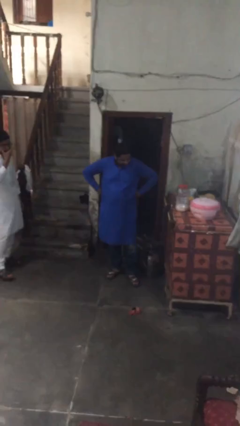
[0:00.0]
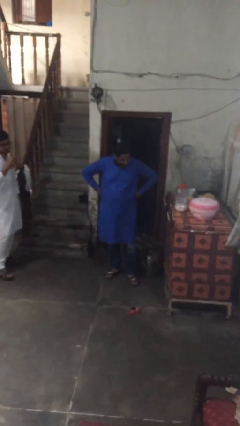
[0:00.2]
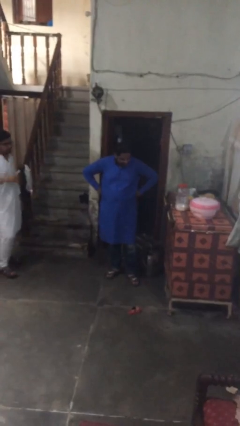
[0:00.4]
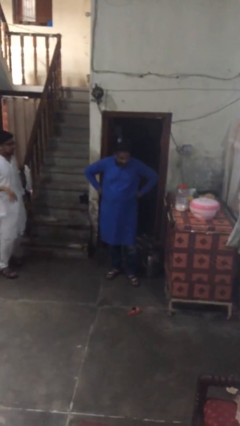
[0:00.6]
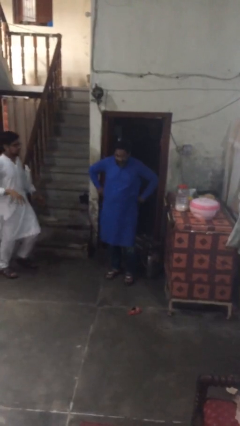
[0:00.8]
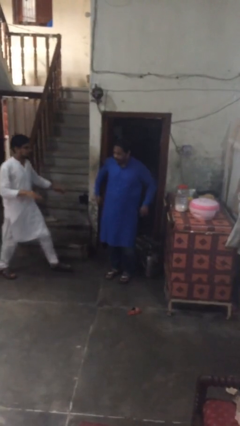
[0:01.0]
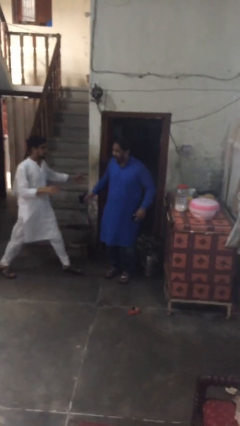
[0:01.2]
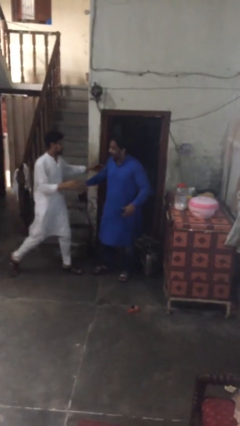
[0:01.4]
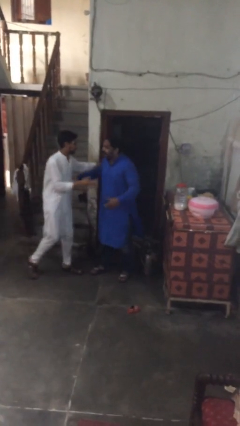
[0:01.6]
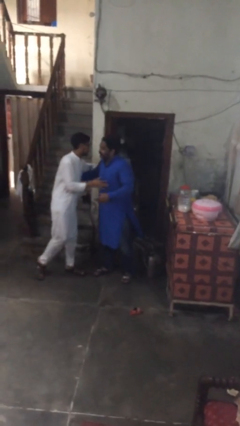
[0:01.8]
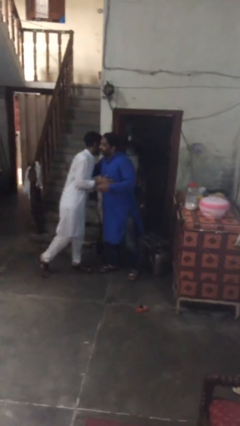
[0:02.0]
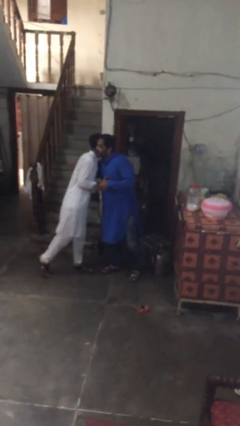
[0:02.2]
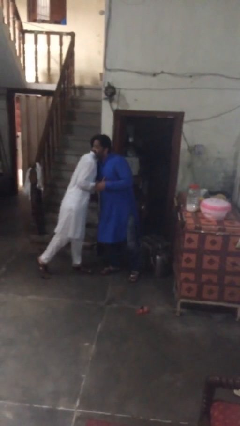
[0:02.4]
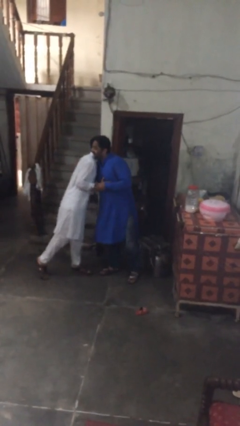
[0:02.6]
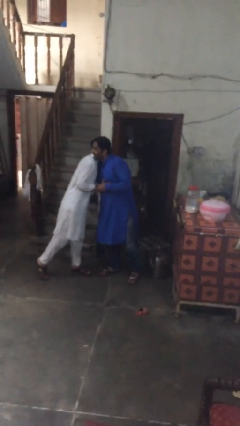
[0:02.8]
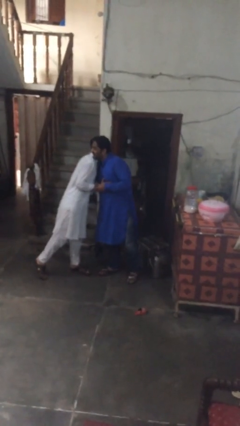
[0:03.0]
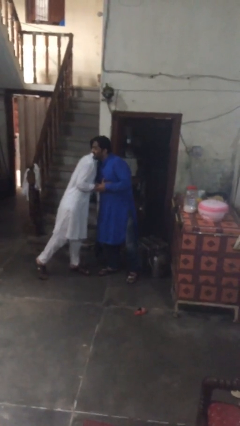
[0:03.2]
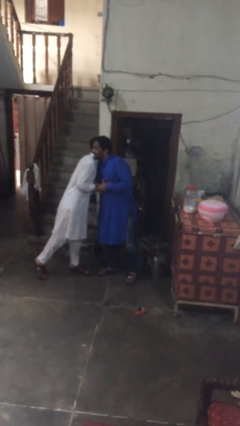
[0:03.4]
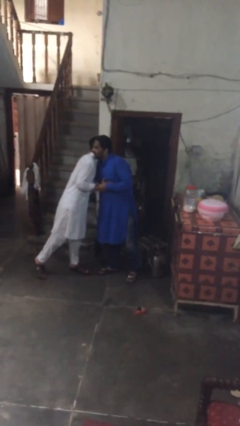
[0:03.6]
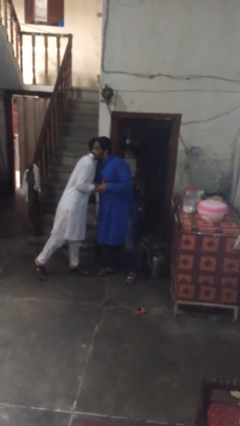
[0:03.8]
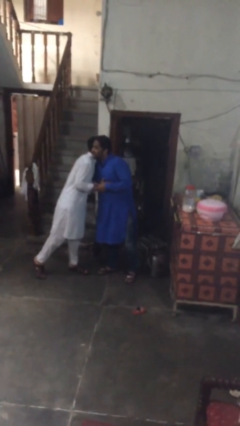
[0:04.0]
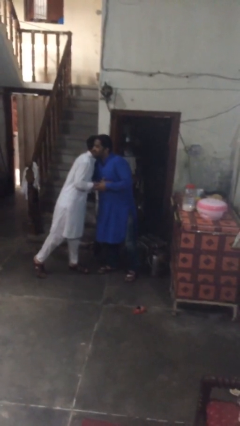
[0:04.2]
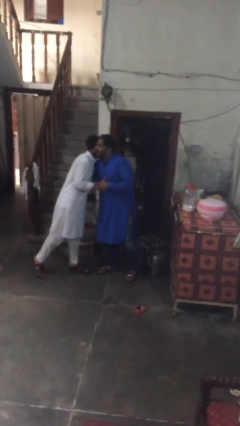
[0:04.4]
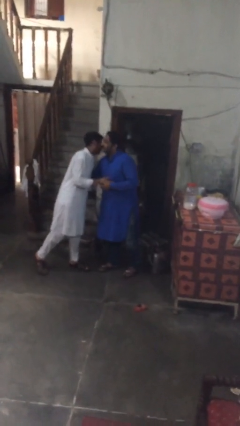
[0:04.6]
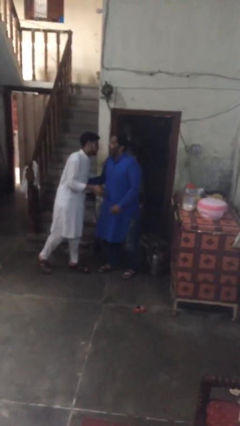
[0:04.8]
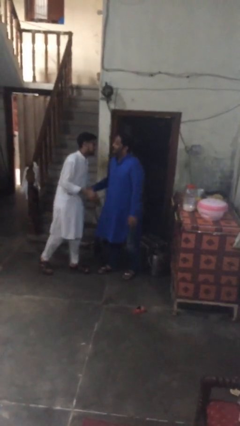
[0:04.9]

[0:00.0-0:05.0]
person embraces person

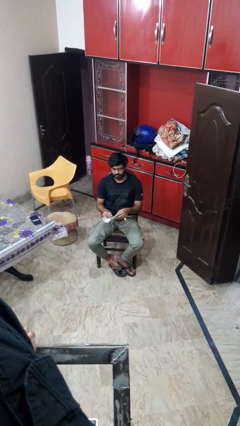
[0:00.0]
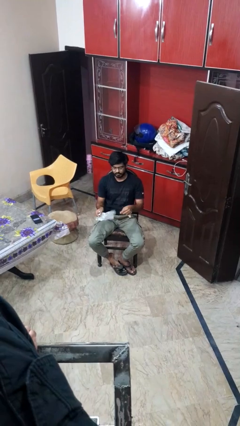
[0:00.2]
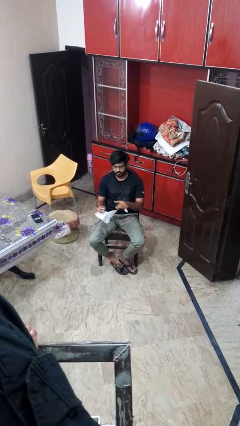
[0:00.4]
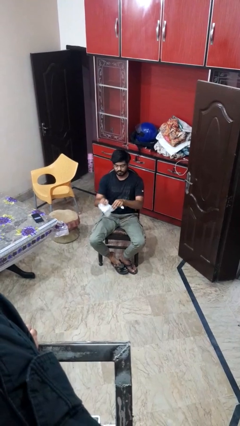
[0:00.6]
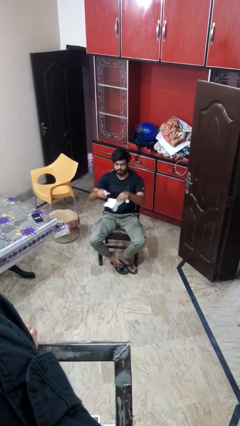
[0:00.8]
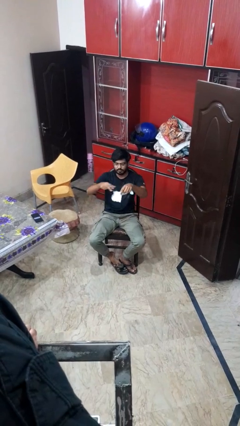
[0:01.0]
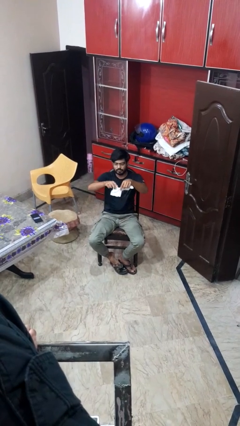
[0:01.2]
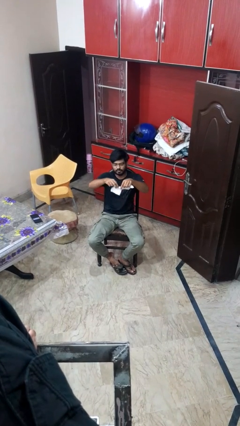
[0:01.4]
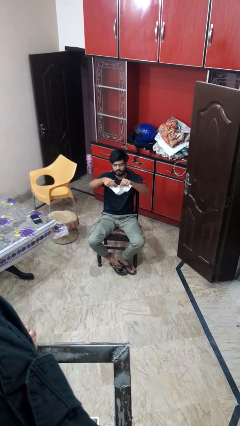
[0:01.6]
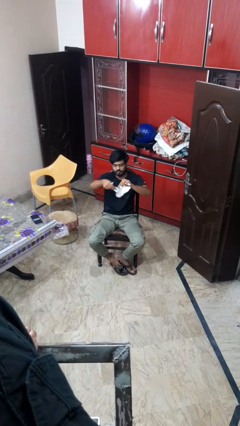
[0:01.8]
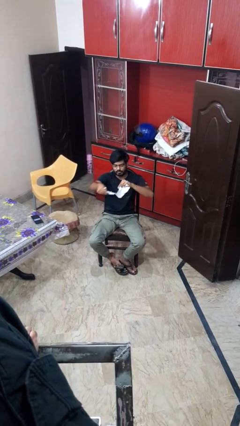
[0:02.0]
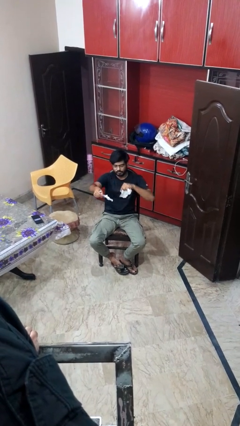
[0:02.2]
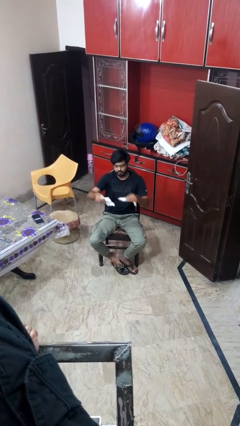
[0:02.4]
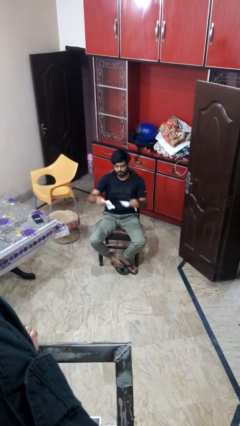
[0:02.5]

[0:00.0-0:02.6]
person tears paper

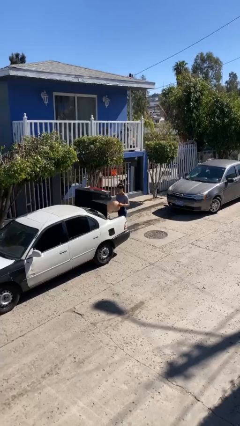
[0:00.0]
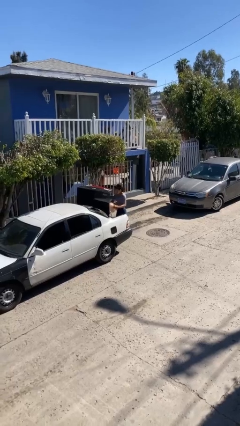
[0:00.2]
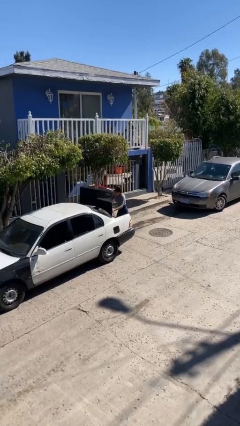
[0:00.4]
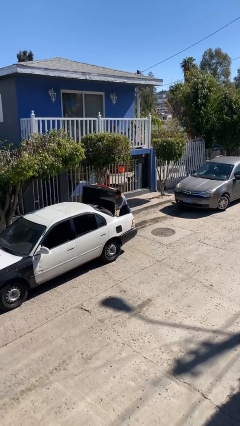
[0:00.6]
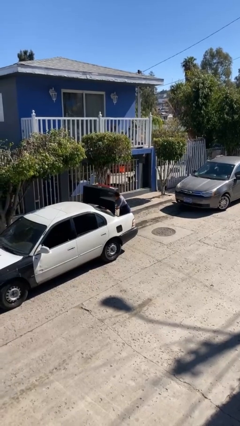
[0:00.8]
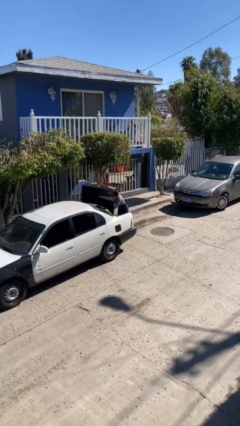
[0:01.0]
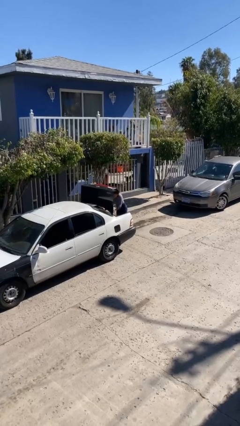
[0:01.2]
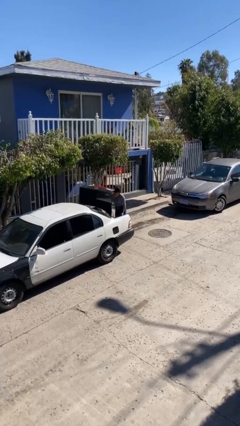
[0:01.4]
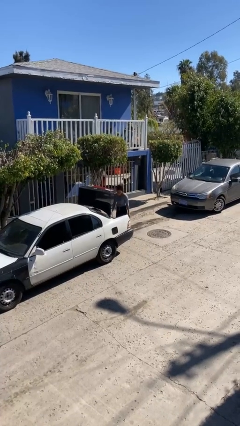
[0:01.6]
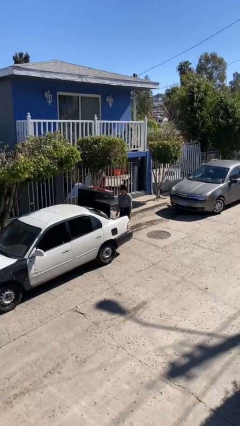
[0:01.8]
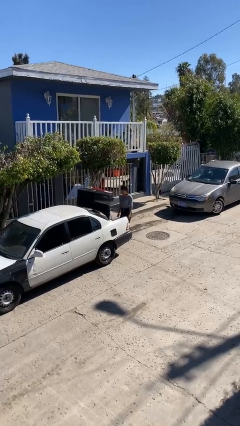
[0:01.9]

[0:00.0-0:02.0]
person loads car

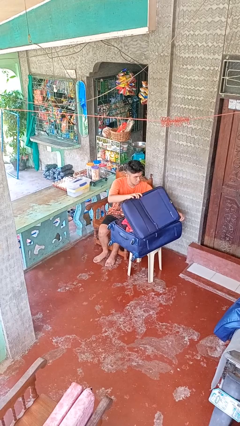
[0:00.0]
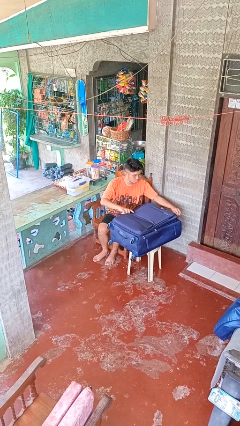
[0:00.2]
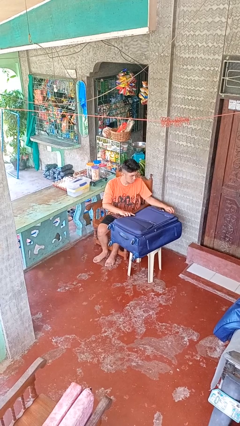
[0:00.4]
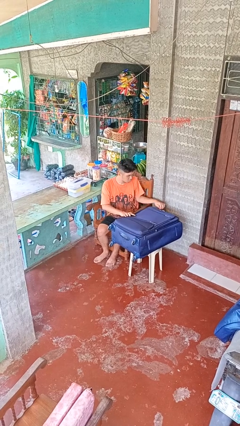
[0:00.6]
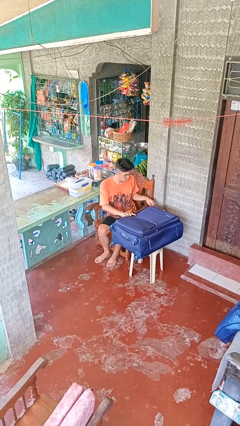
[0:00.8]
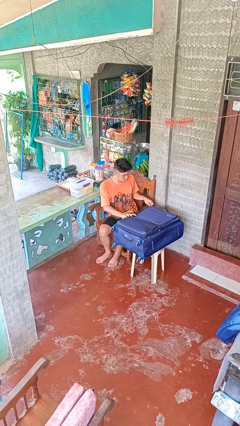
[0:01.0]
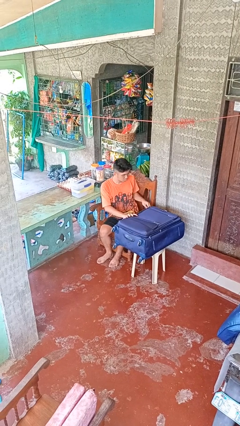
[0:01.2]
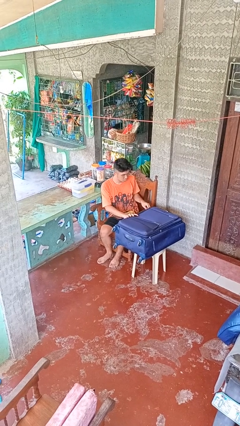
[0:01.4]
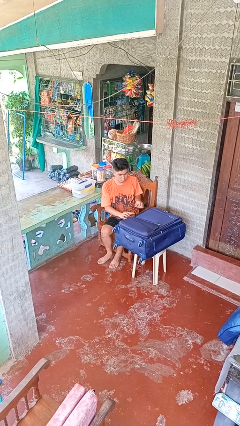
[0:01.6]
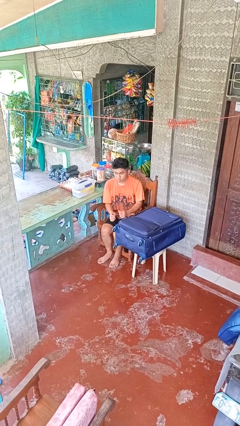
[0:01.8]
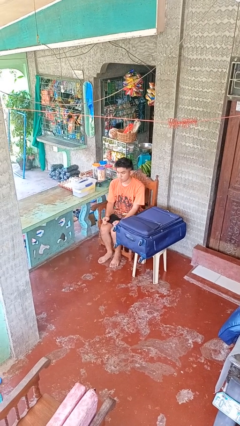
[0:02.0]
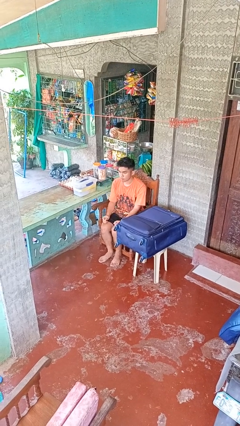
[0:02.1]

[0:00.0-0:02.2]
person closes suitcase

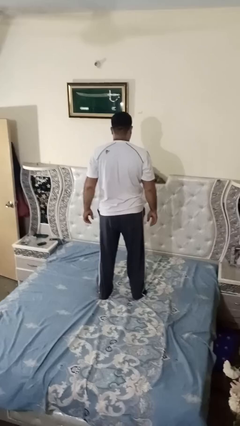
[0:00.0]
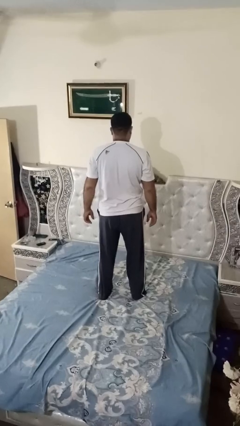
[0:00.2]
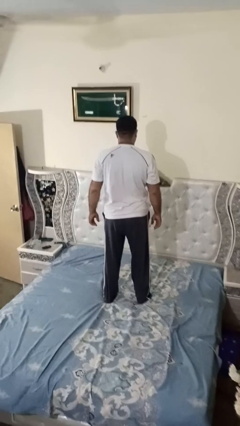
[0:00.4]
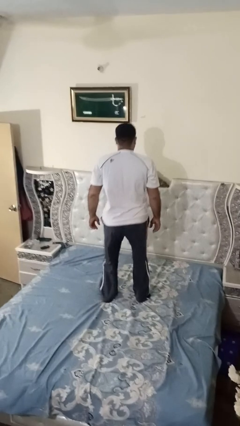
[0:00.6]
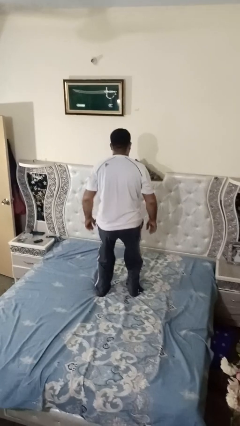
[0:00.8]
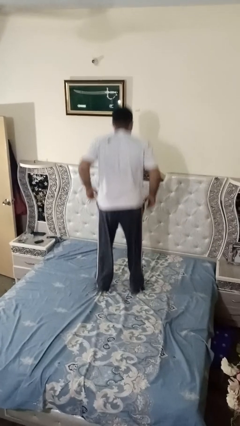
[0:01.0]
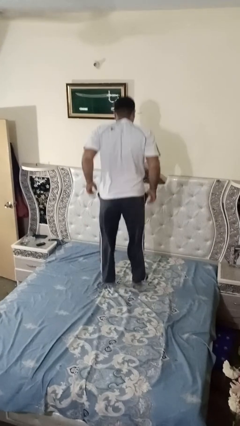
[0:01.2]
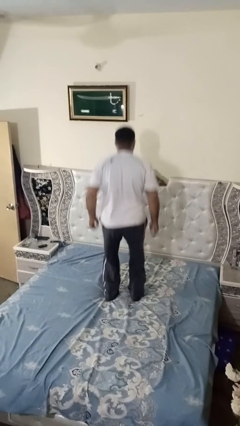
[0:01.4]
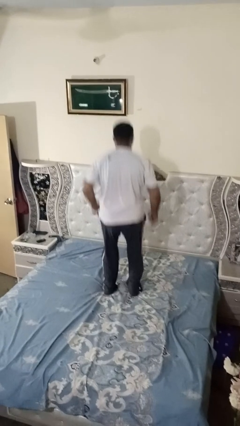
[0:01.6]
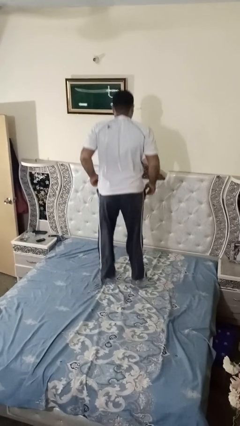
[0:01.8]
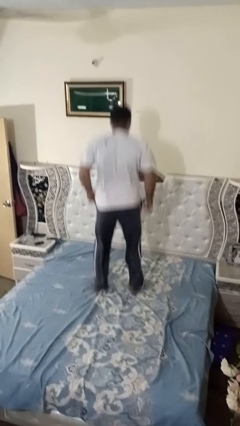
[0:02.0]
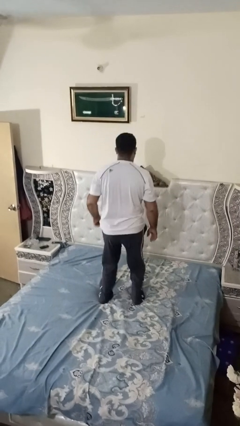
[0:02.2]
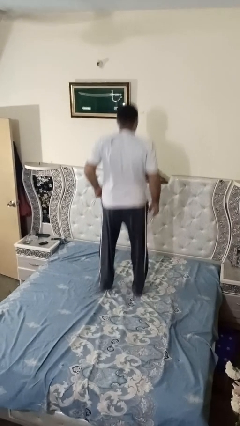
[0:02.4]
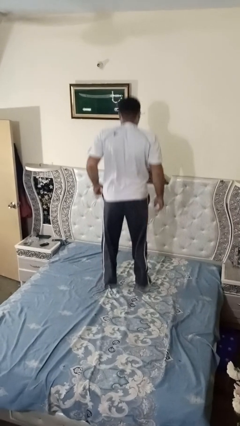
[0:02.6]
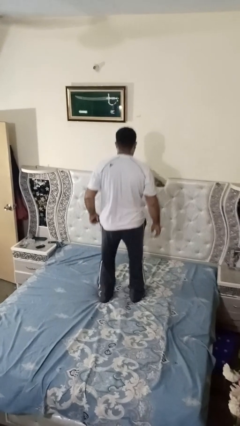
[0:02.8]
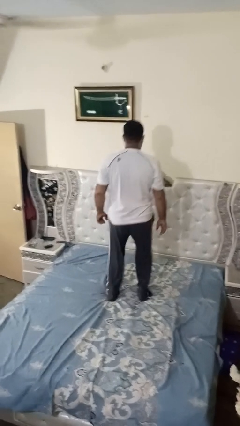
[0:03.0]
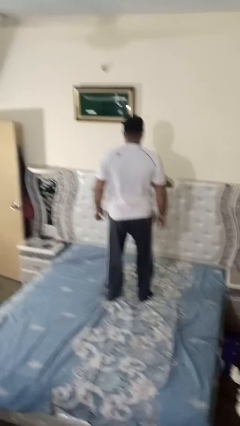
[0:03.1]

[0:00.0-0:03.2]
person jumps on bed

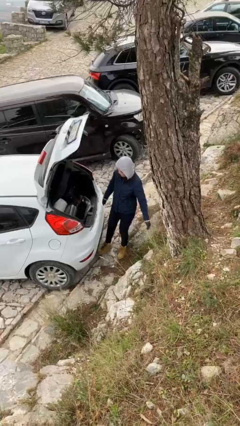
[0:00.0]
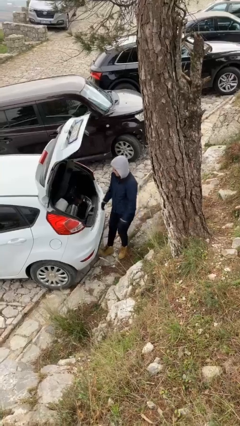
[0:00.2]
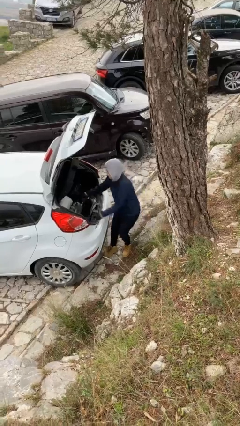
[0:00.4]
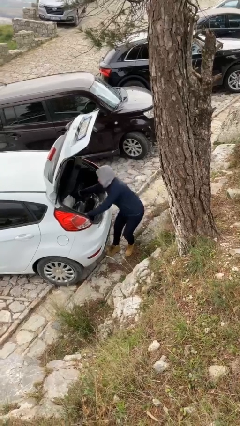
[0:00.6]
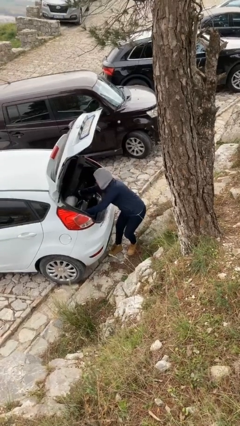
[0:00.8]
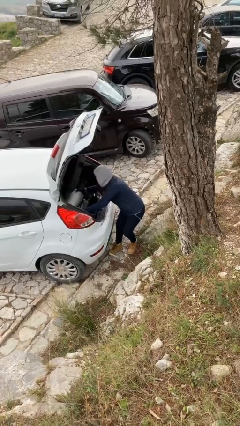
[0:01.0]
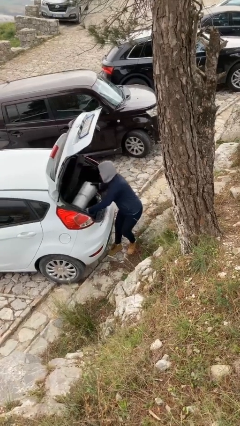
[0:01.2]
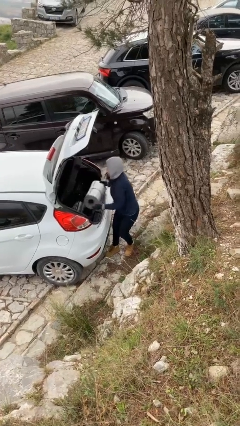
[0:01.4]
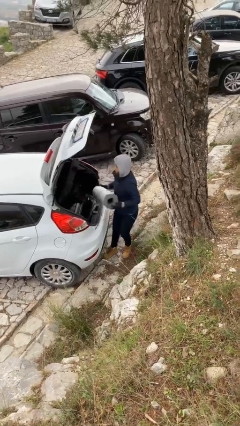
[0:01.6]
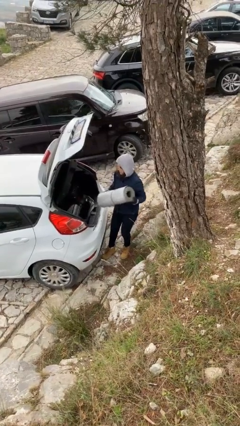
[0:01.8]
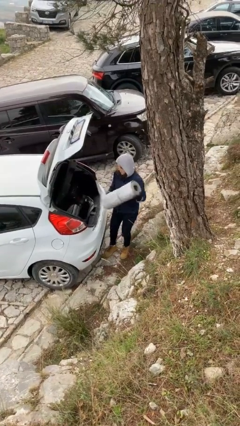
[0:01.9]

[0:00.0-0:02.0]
person unloads car

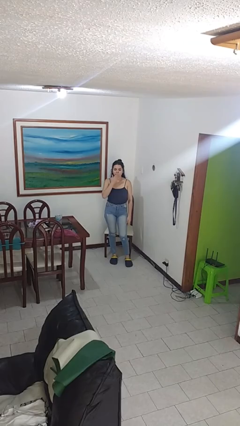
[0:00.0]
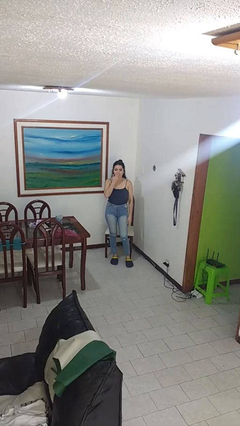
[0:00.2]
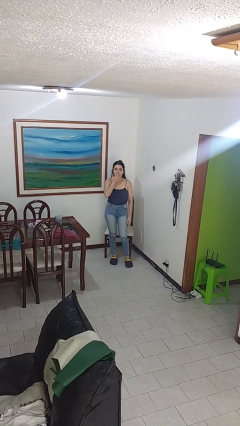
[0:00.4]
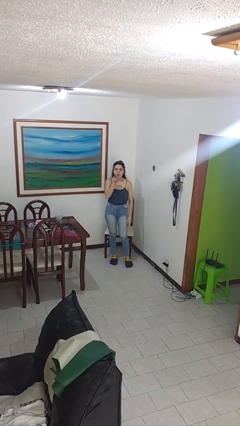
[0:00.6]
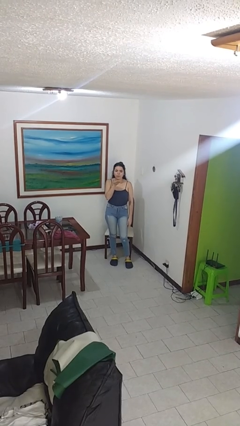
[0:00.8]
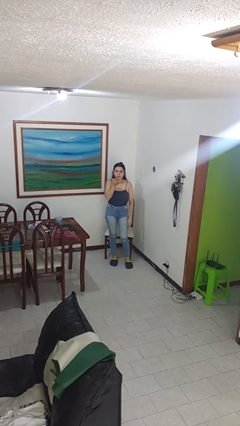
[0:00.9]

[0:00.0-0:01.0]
person gestures blow kiss
